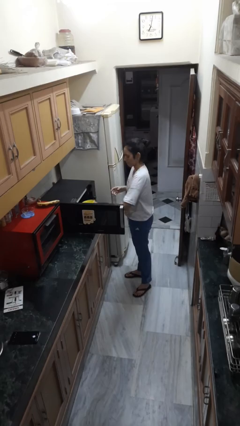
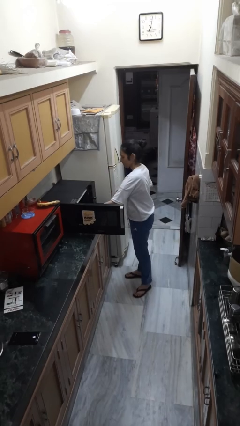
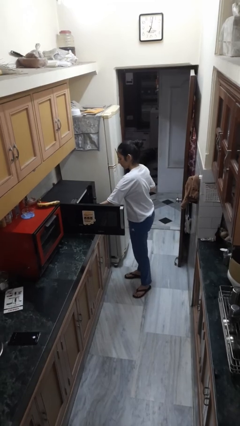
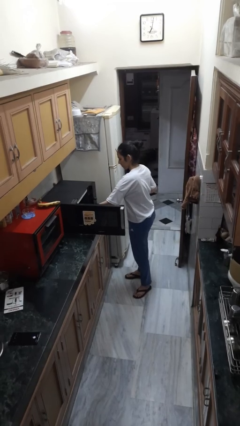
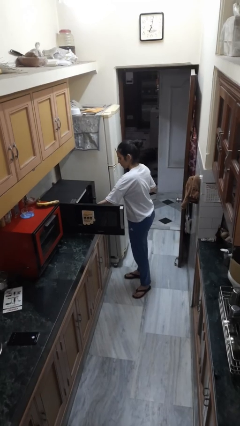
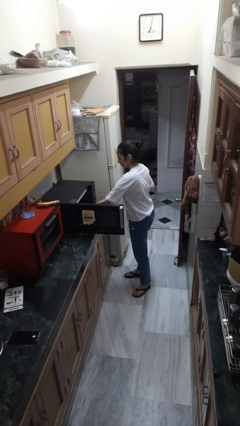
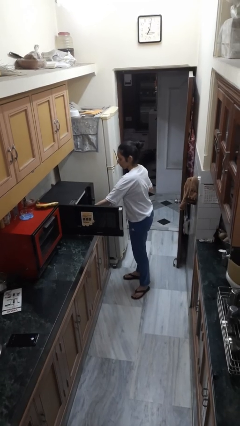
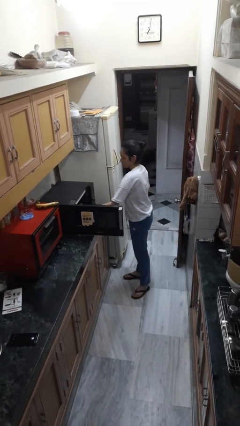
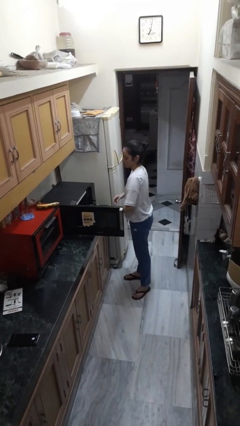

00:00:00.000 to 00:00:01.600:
person puts object into microwave

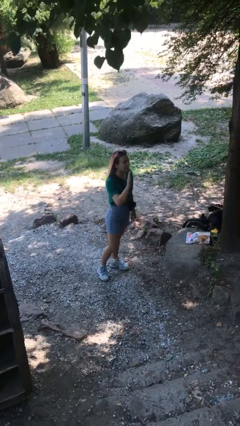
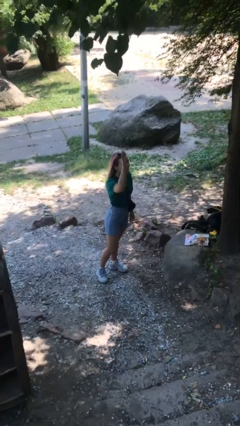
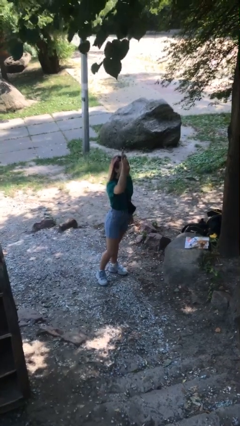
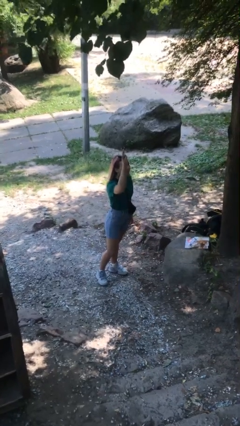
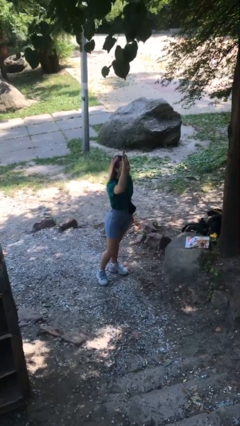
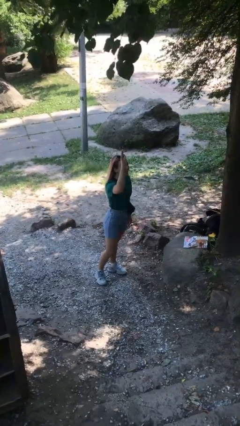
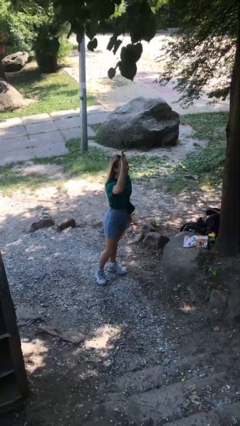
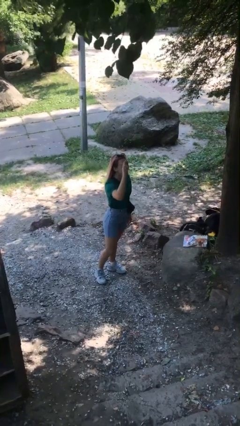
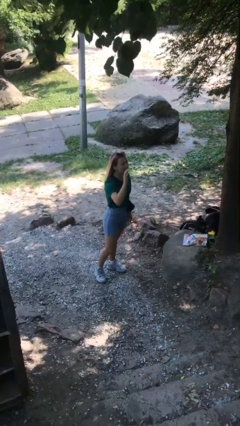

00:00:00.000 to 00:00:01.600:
person gestures raise hand

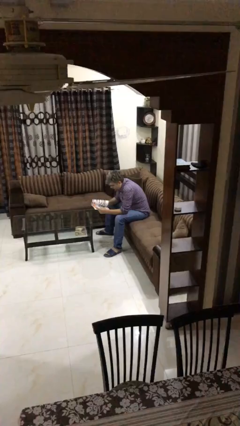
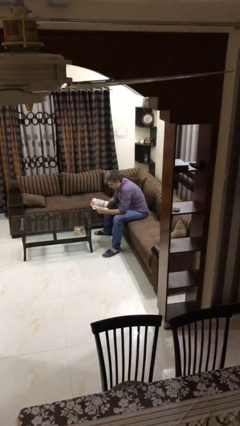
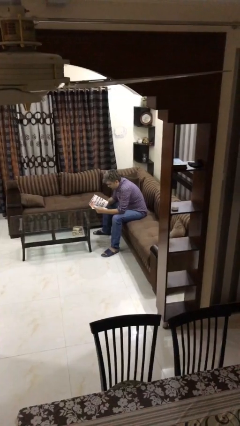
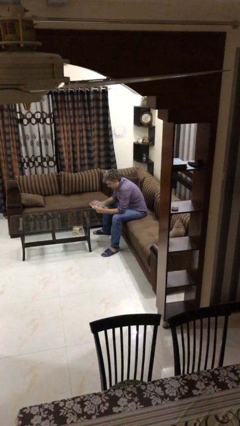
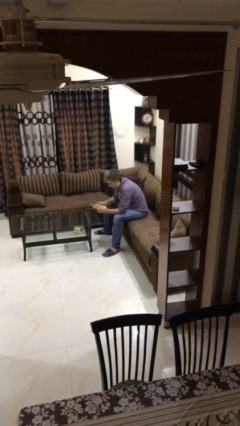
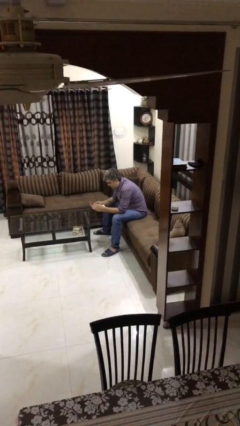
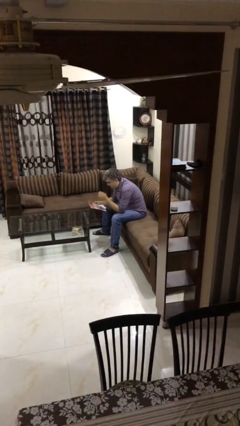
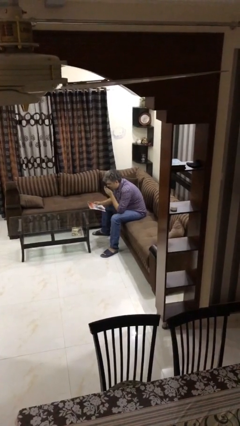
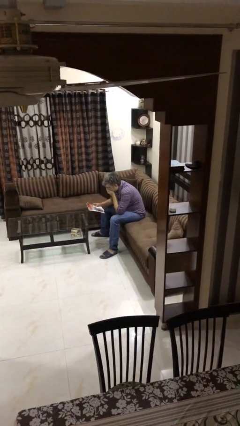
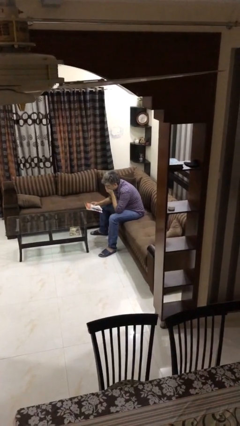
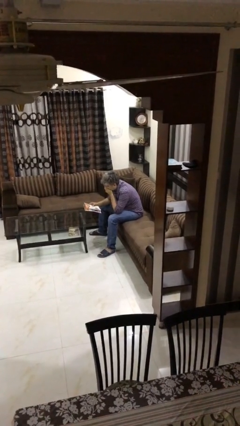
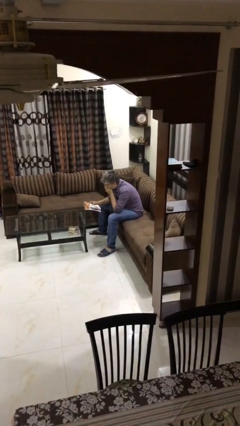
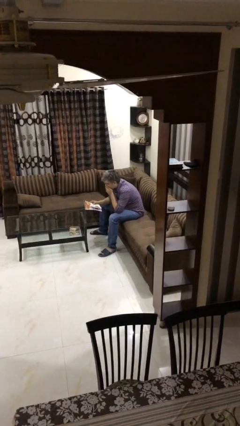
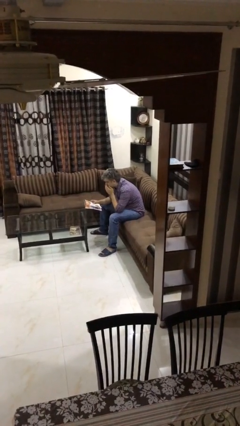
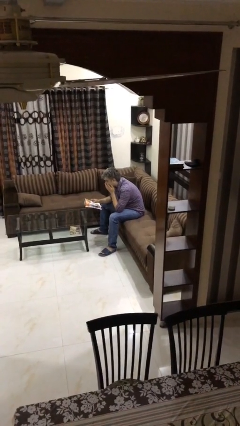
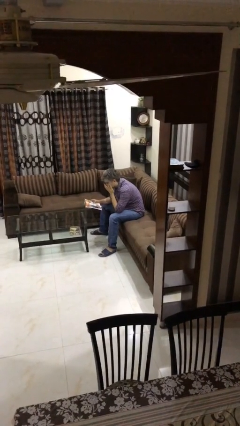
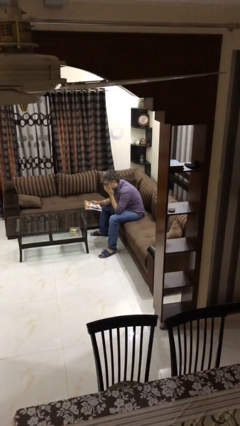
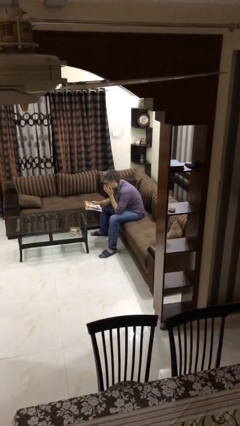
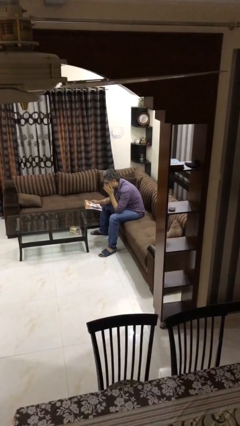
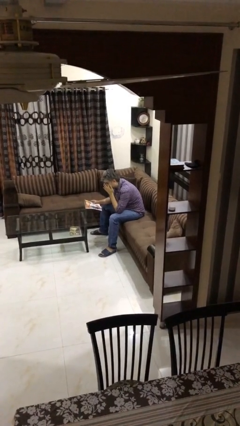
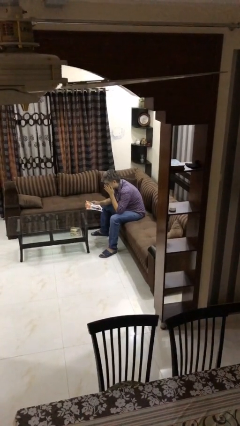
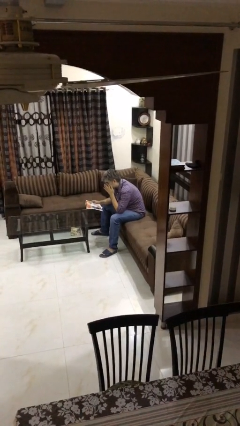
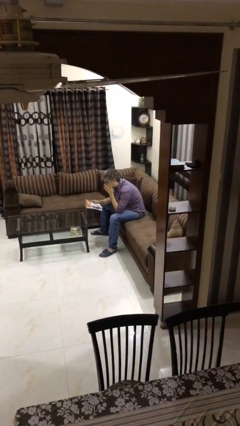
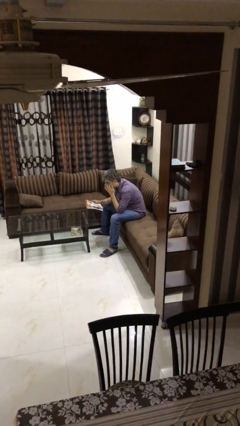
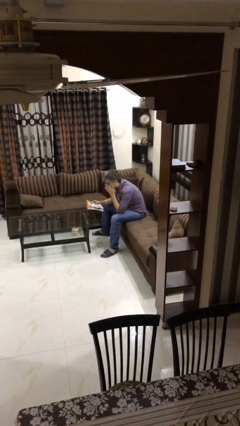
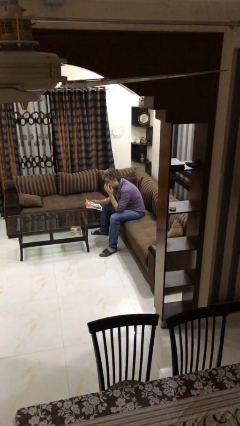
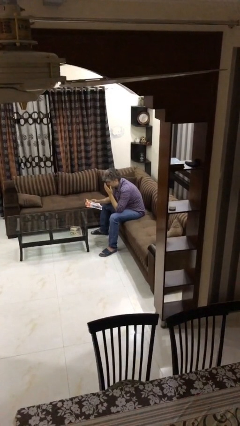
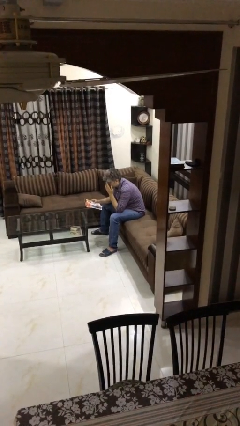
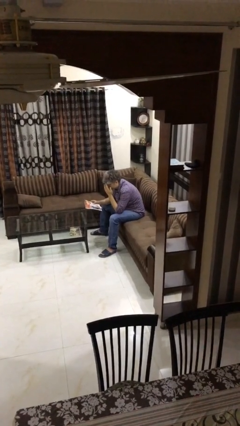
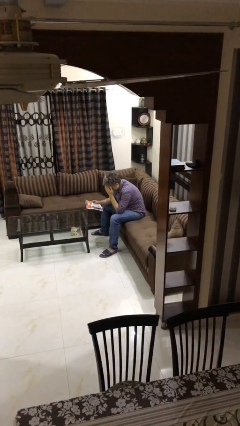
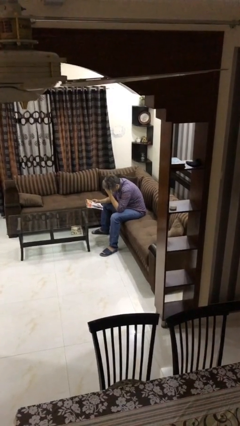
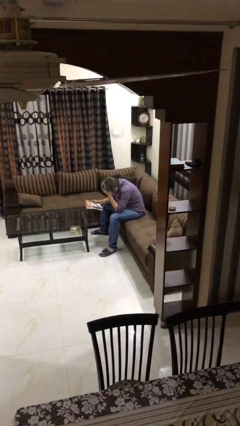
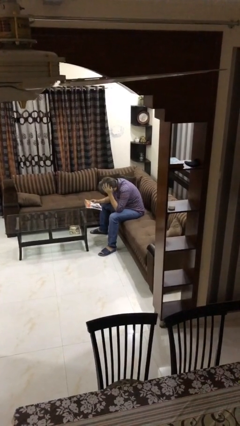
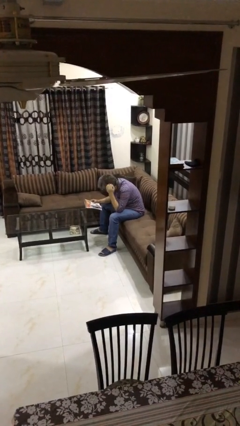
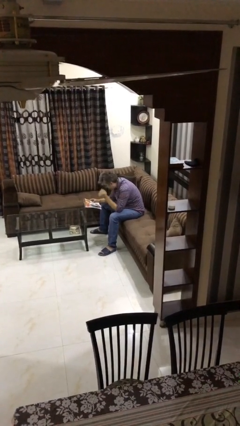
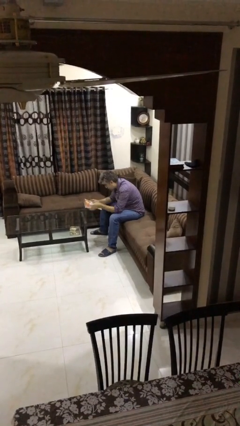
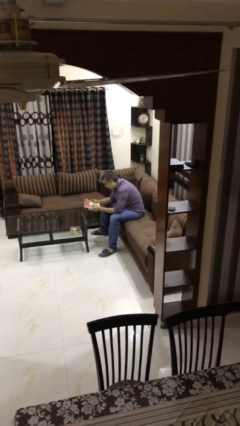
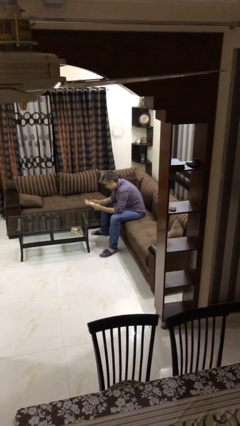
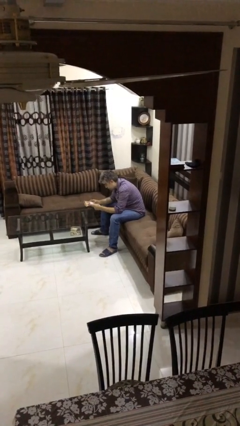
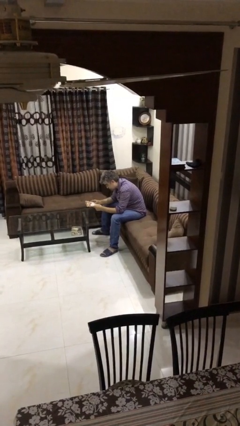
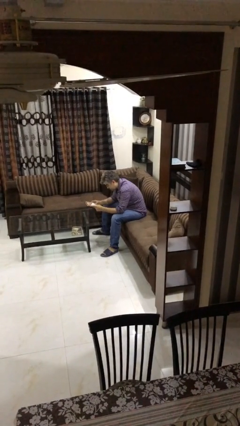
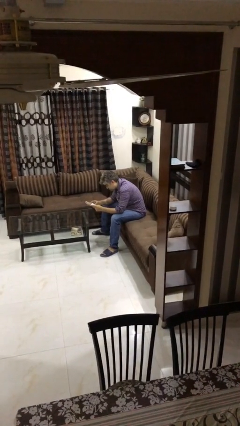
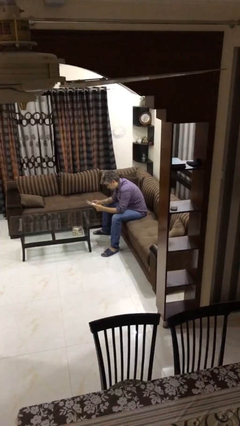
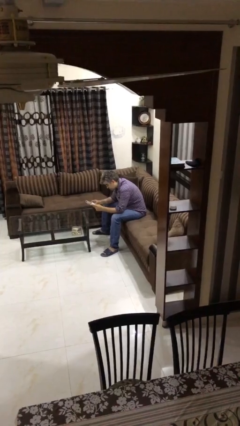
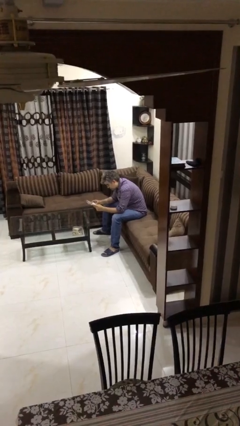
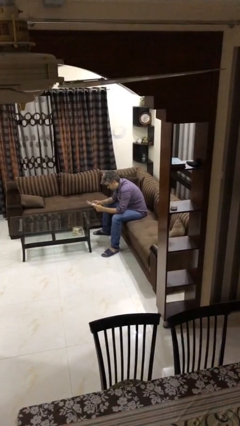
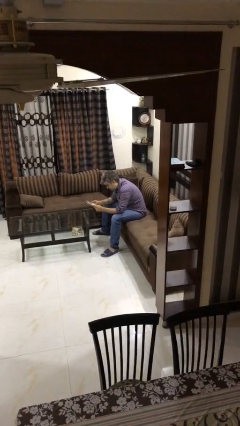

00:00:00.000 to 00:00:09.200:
person reads document

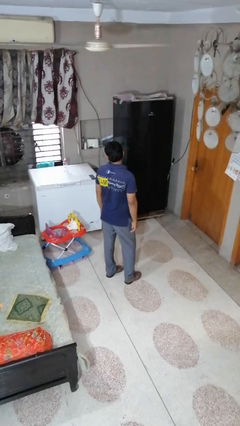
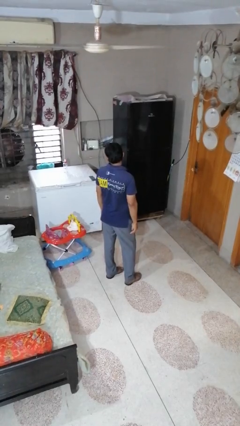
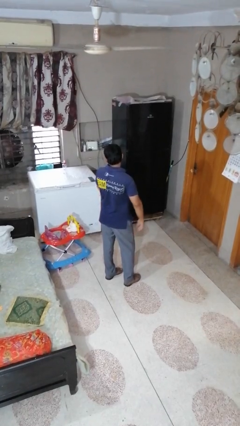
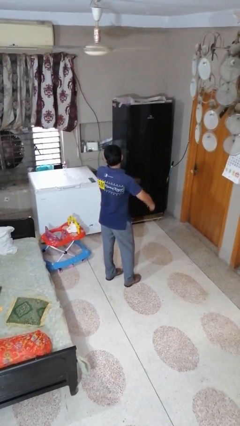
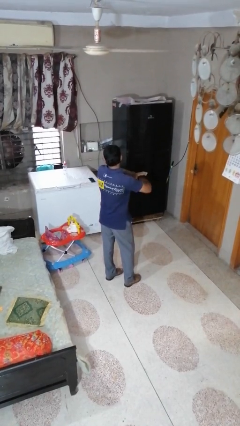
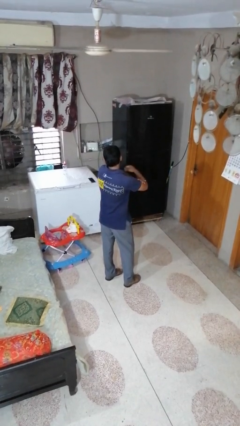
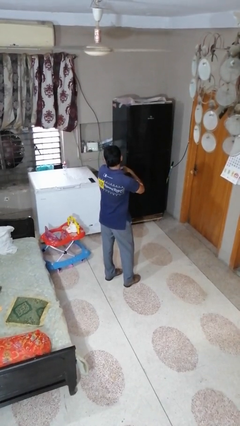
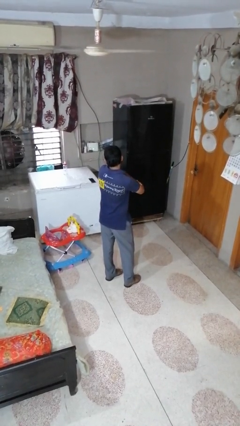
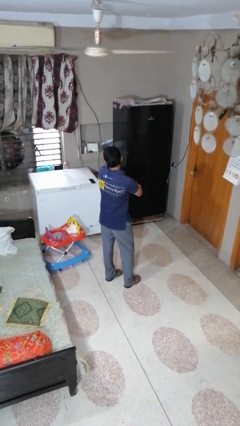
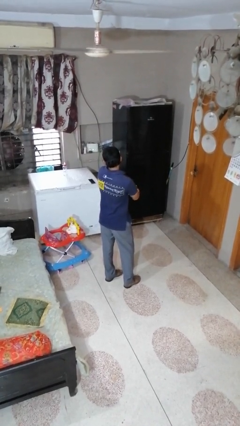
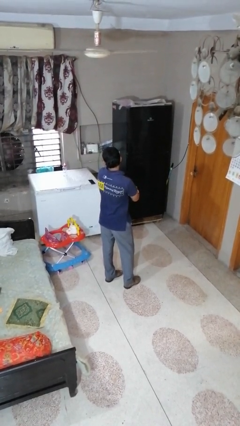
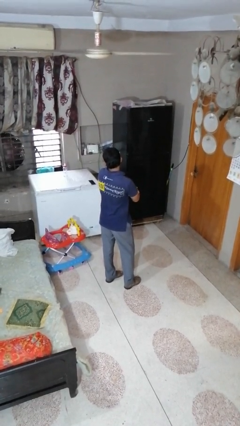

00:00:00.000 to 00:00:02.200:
person crosses arms

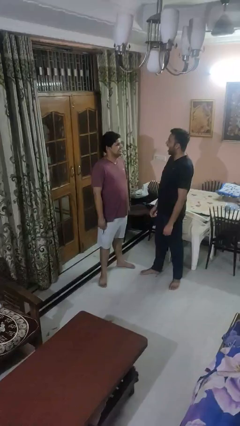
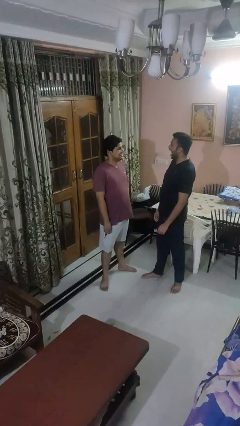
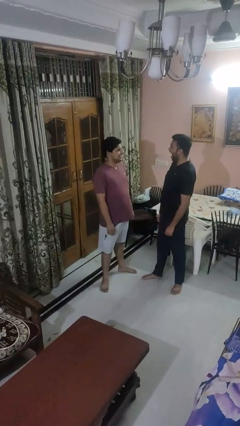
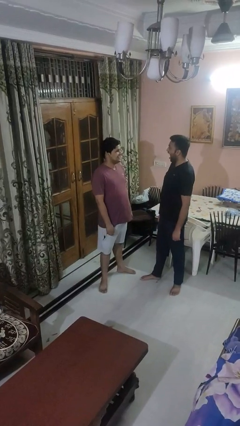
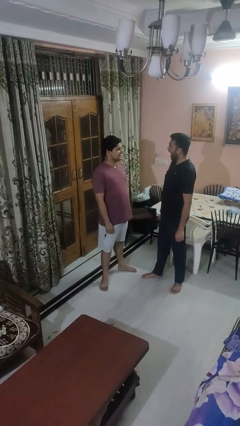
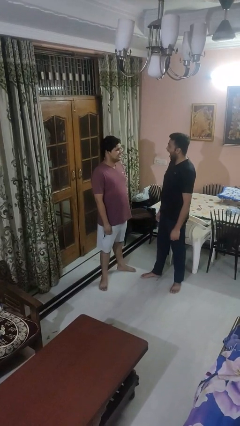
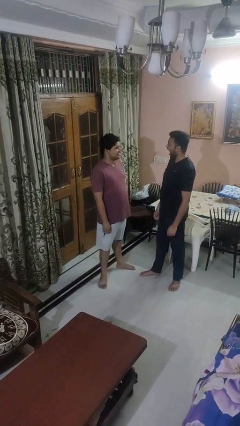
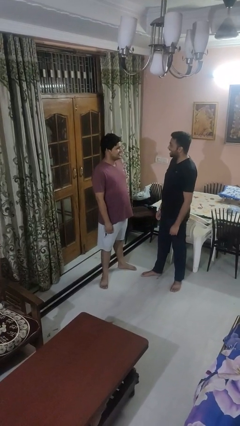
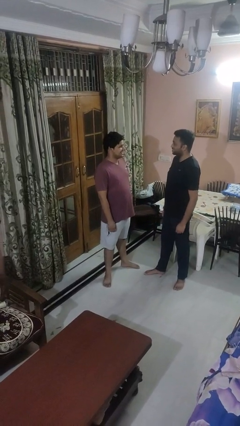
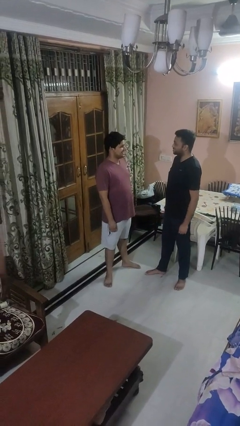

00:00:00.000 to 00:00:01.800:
person laughs with person

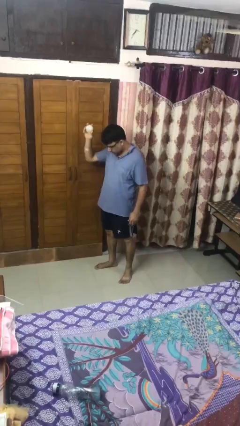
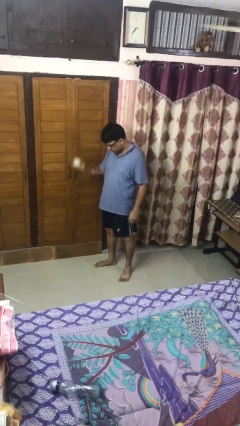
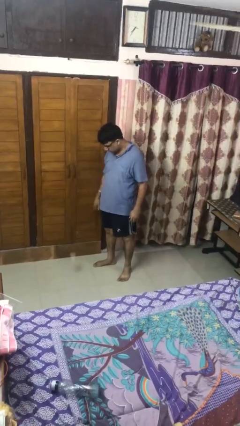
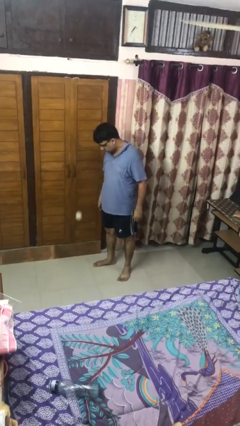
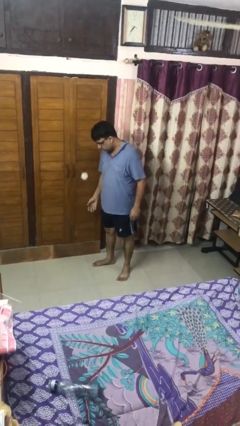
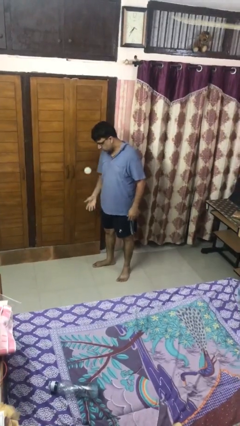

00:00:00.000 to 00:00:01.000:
person bounces ball on floor
